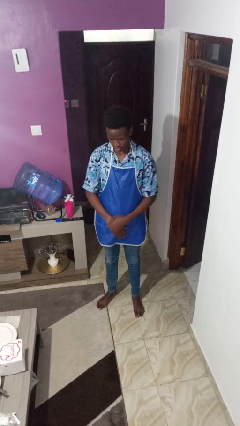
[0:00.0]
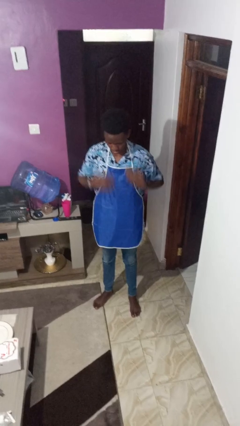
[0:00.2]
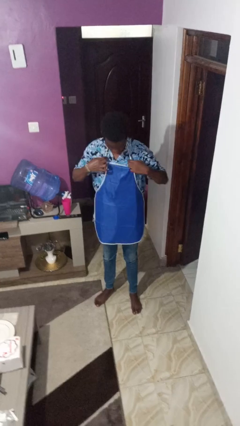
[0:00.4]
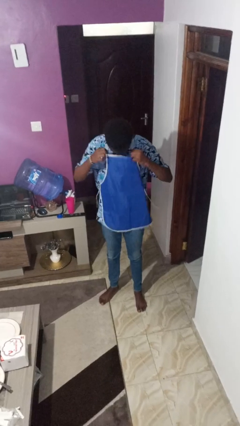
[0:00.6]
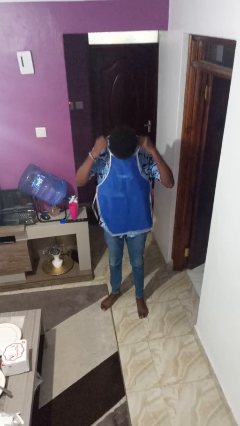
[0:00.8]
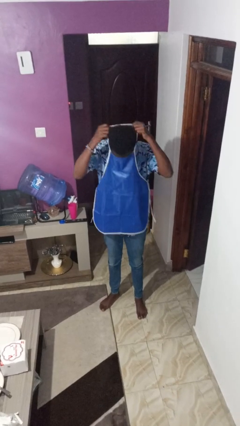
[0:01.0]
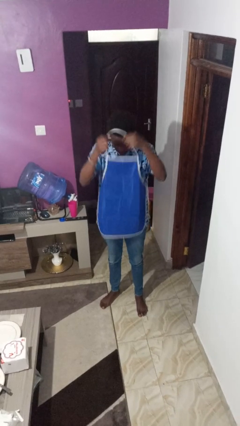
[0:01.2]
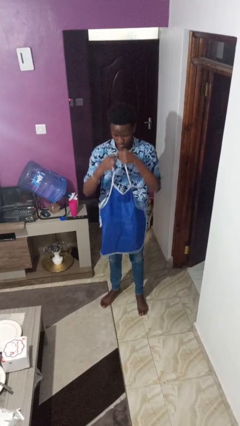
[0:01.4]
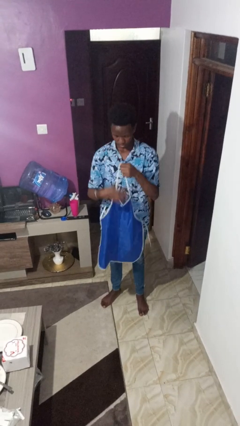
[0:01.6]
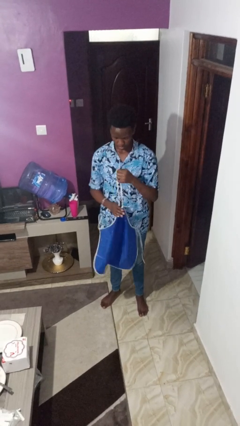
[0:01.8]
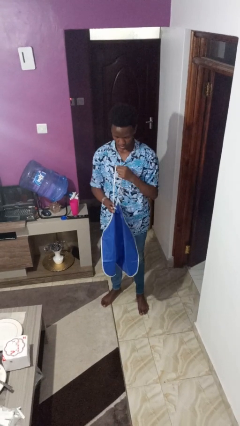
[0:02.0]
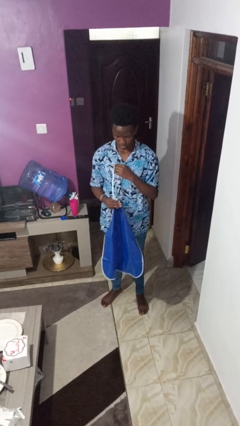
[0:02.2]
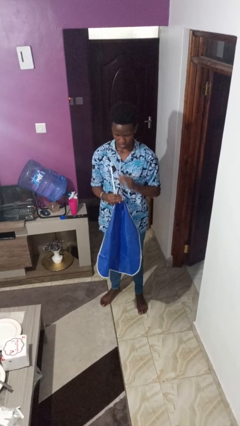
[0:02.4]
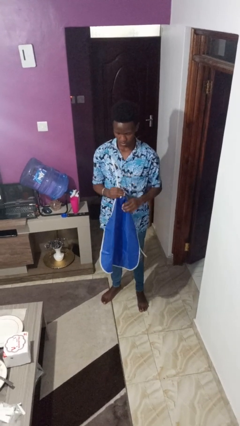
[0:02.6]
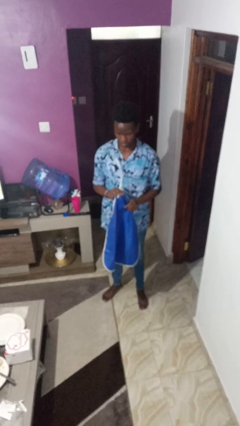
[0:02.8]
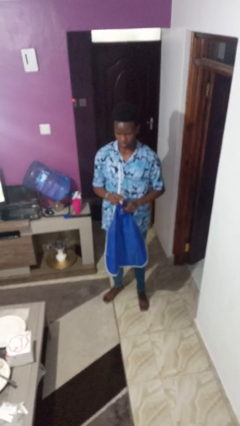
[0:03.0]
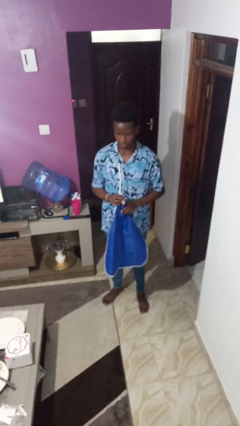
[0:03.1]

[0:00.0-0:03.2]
person takes off apron

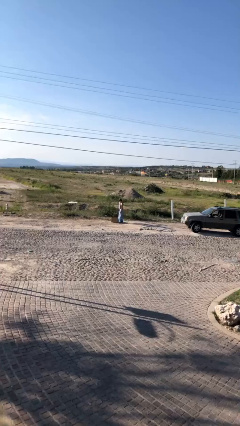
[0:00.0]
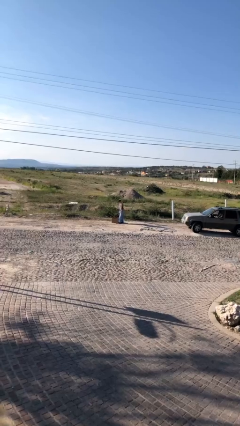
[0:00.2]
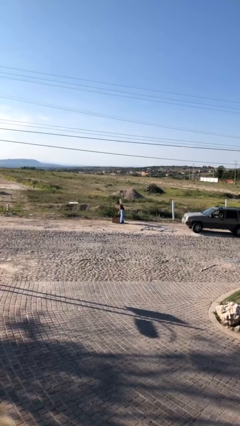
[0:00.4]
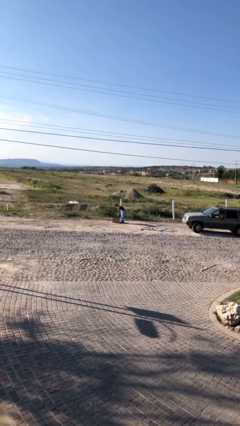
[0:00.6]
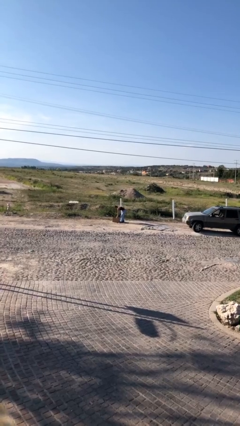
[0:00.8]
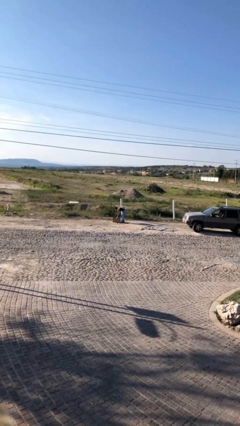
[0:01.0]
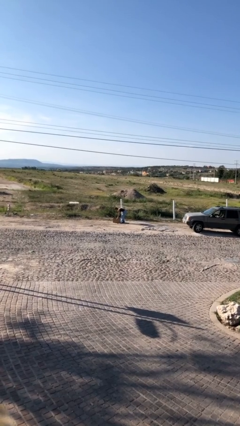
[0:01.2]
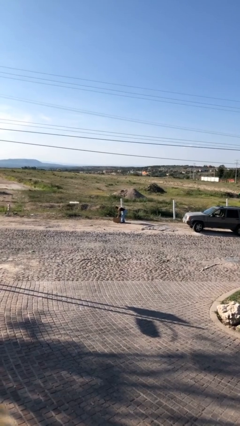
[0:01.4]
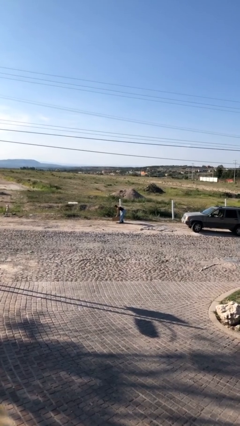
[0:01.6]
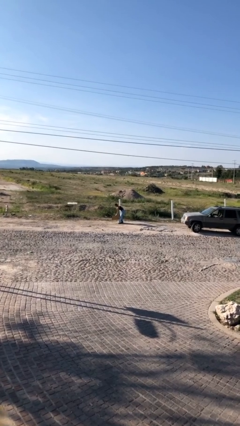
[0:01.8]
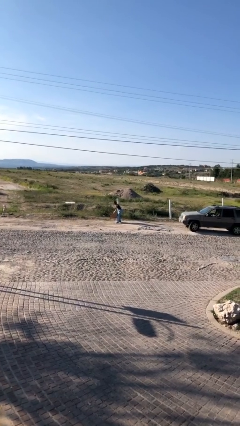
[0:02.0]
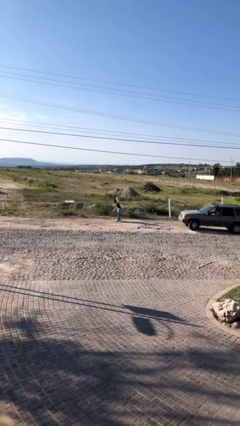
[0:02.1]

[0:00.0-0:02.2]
person picks up object from floor

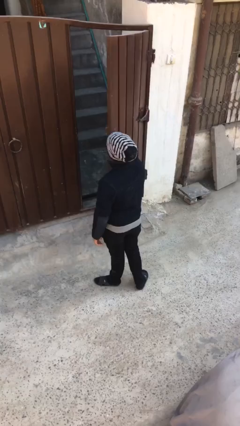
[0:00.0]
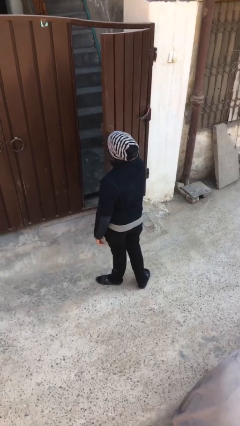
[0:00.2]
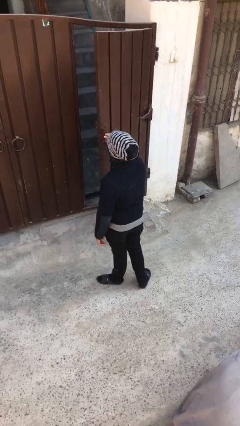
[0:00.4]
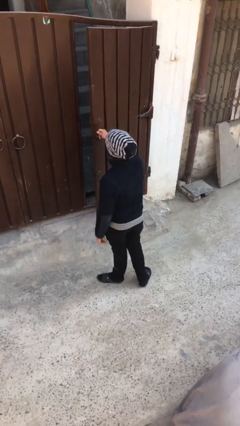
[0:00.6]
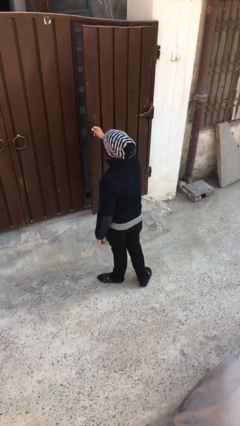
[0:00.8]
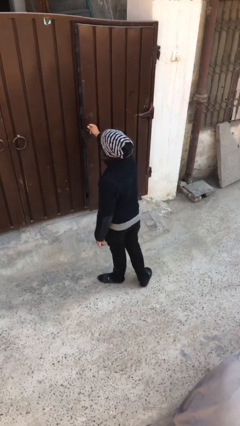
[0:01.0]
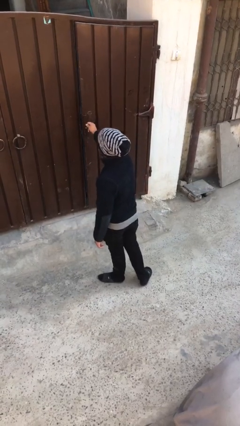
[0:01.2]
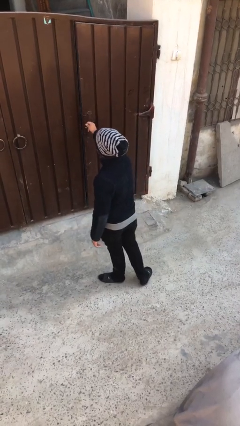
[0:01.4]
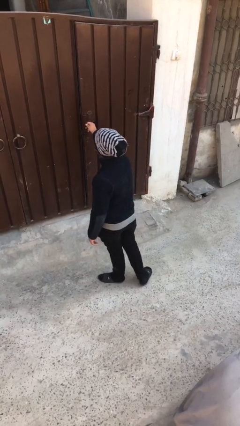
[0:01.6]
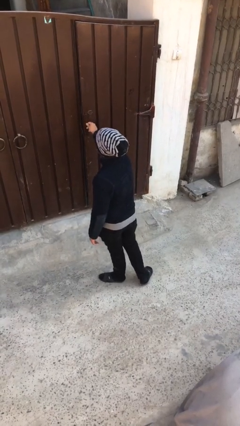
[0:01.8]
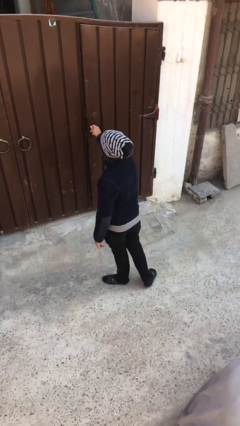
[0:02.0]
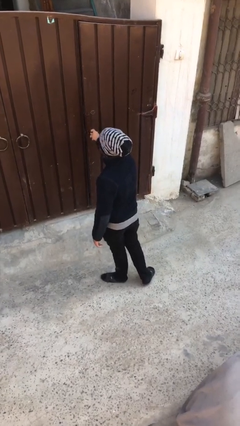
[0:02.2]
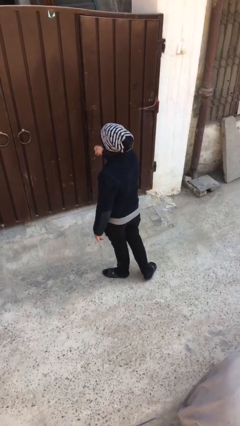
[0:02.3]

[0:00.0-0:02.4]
person closes facility door

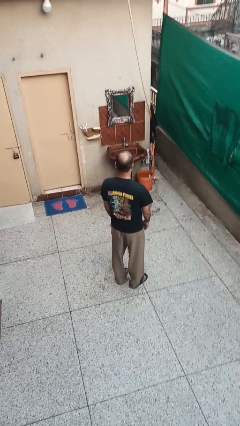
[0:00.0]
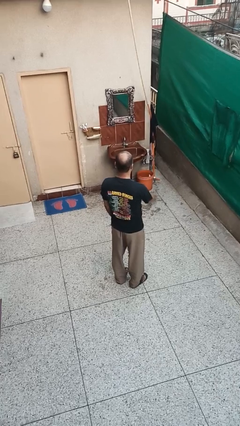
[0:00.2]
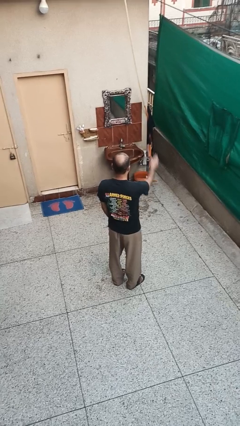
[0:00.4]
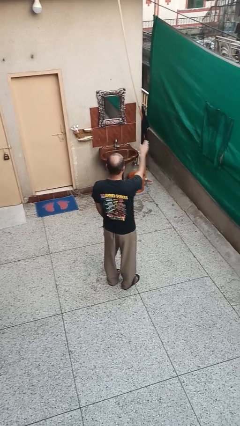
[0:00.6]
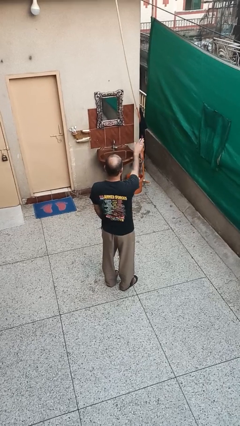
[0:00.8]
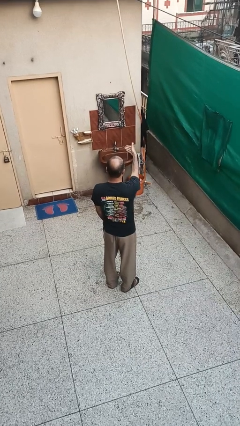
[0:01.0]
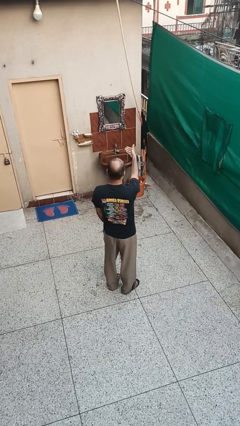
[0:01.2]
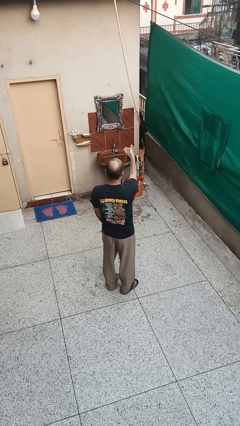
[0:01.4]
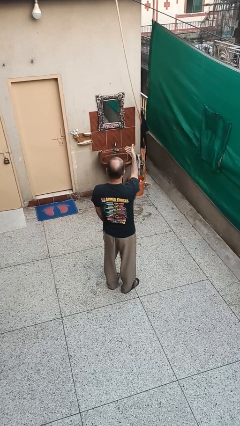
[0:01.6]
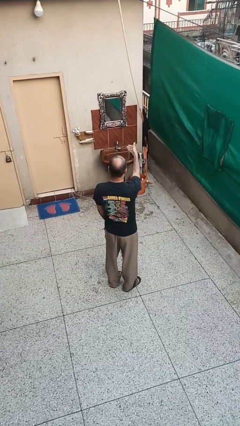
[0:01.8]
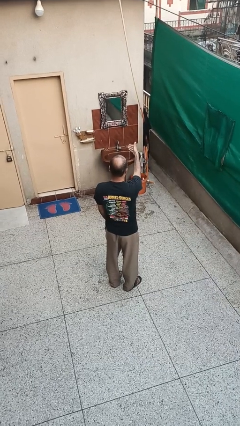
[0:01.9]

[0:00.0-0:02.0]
person gestures swipe left

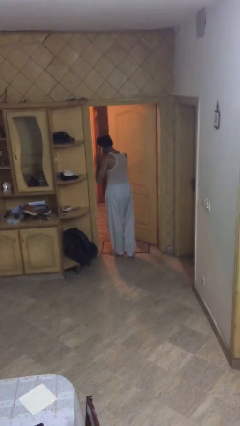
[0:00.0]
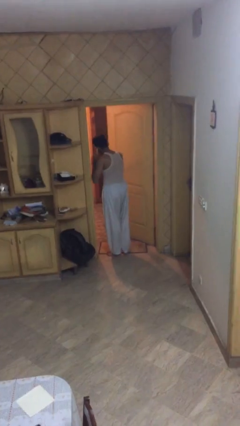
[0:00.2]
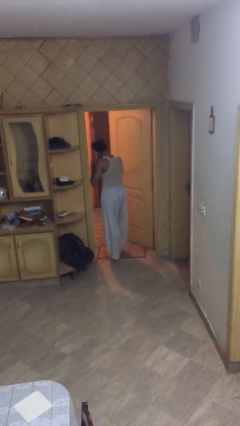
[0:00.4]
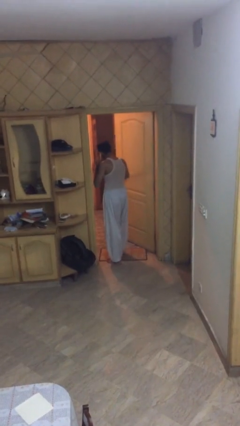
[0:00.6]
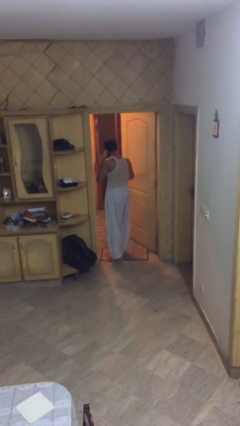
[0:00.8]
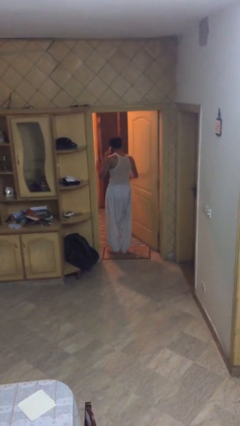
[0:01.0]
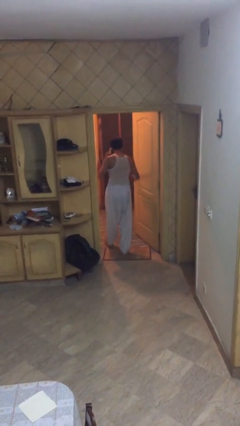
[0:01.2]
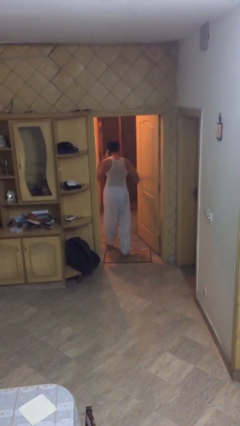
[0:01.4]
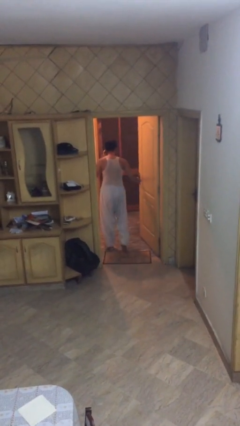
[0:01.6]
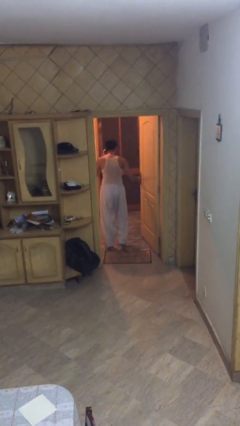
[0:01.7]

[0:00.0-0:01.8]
person exits scene through structure

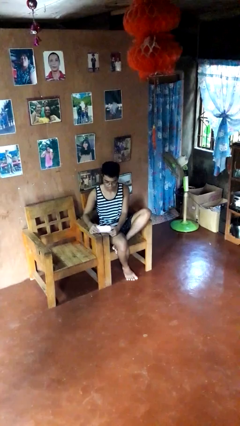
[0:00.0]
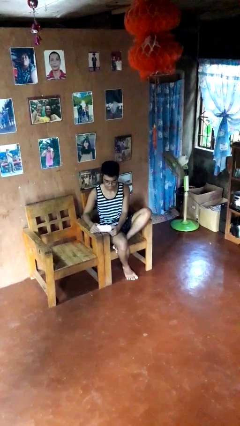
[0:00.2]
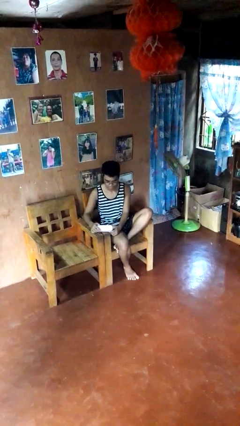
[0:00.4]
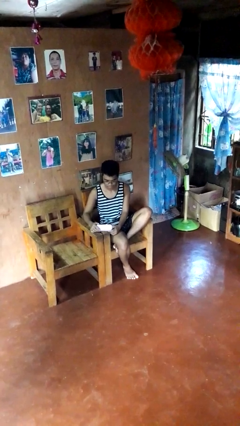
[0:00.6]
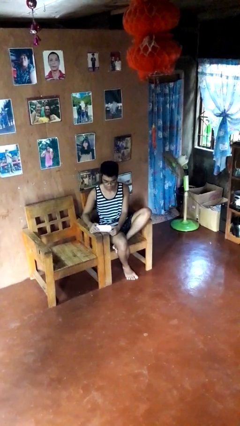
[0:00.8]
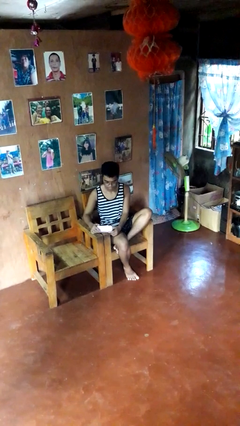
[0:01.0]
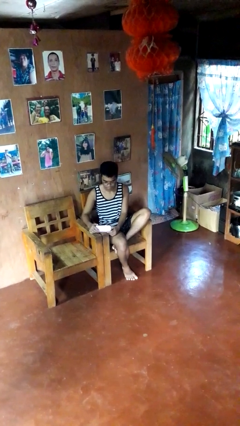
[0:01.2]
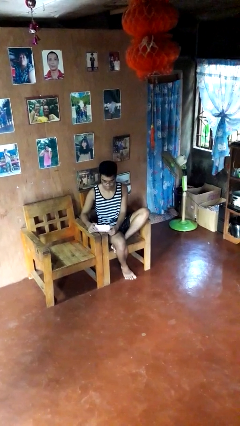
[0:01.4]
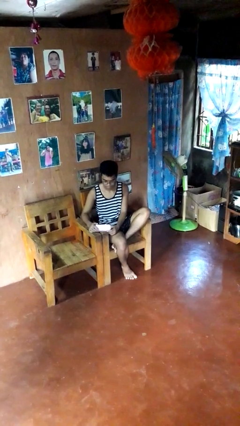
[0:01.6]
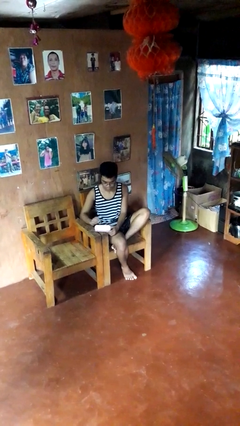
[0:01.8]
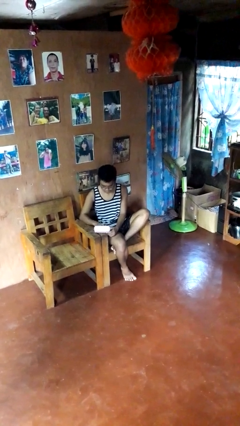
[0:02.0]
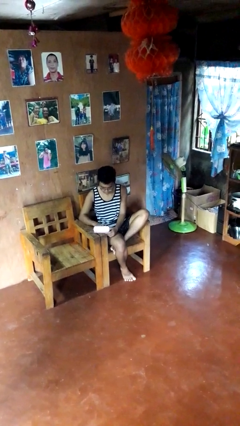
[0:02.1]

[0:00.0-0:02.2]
person opens jewelry box

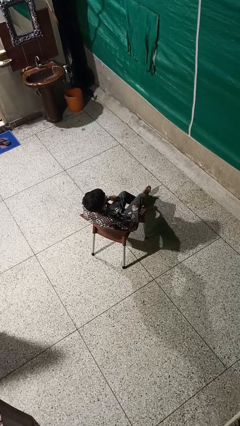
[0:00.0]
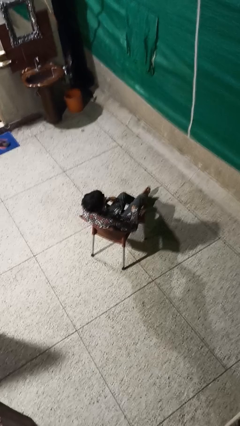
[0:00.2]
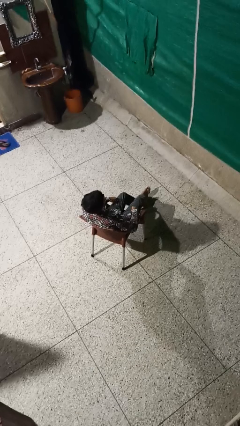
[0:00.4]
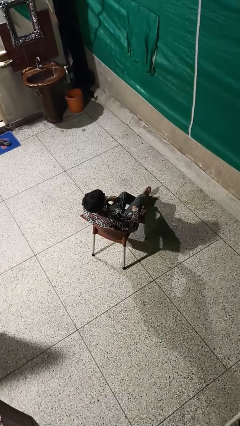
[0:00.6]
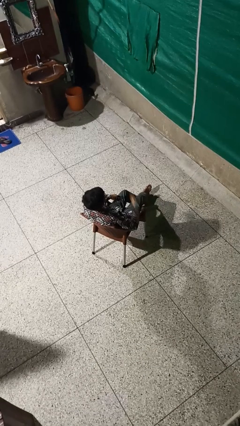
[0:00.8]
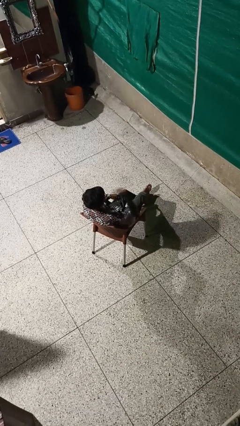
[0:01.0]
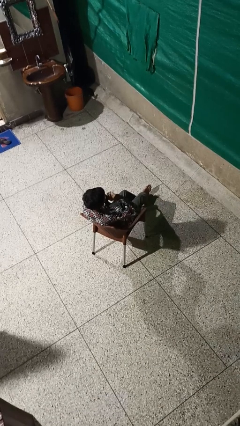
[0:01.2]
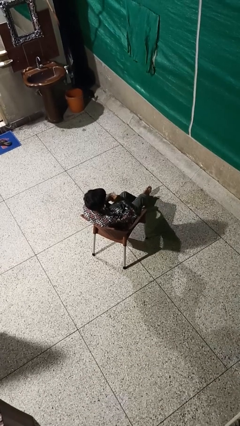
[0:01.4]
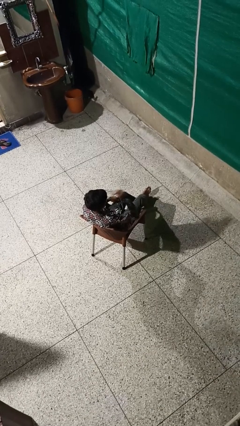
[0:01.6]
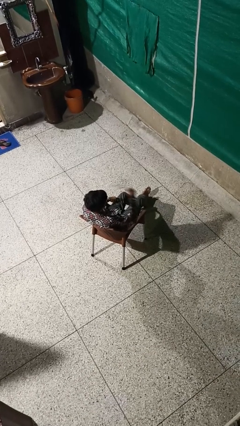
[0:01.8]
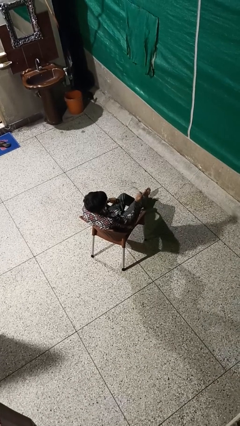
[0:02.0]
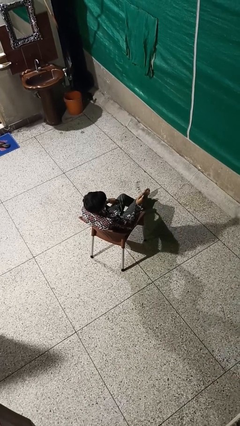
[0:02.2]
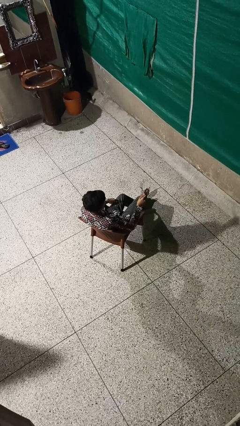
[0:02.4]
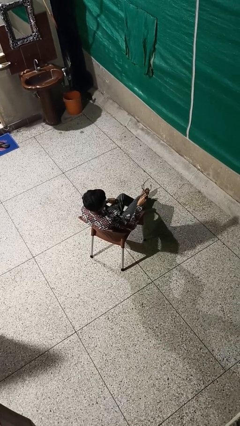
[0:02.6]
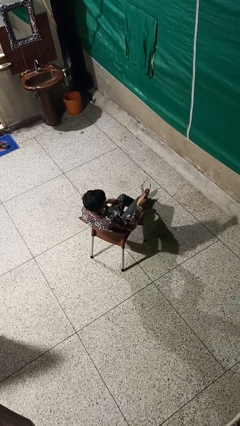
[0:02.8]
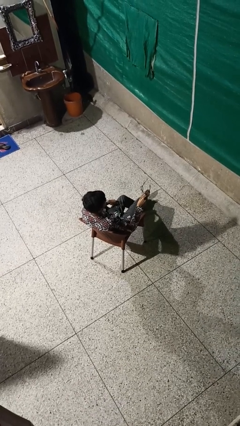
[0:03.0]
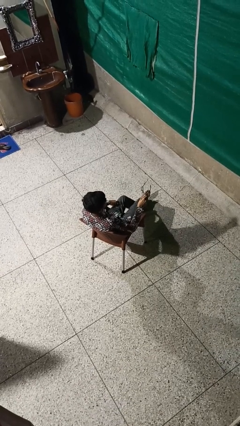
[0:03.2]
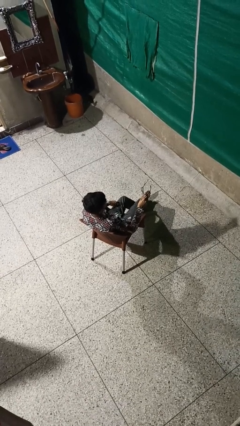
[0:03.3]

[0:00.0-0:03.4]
person takes off glasses
